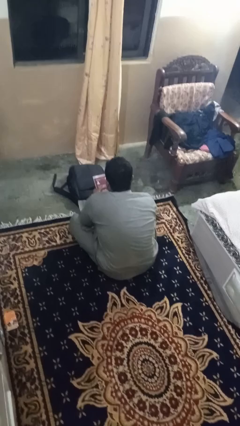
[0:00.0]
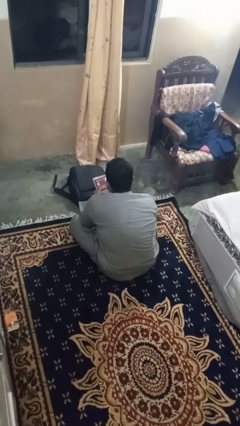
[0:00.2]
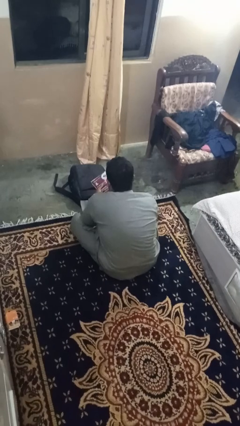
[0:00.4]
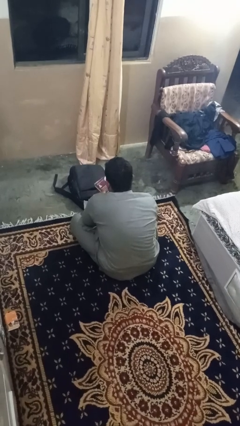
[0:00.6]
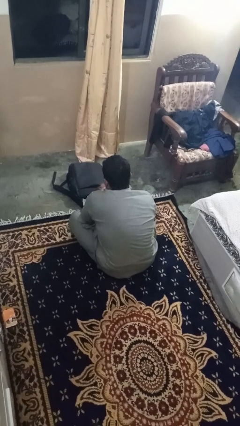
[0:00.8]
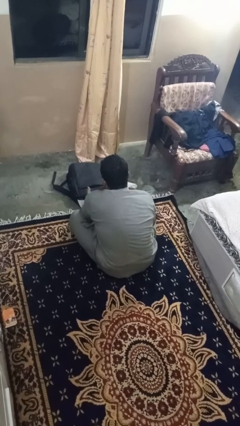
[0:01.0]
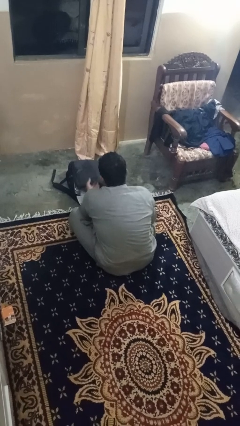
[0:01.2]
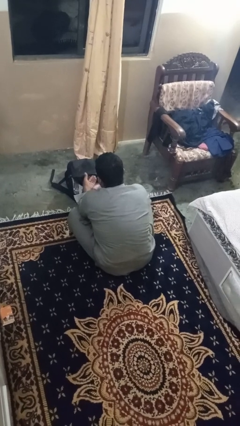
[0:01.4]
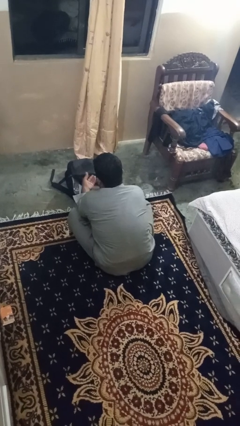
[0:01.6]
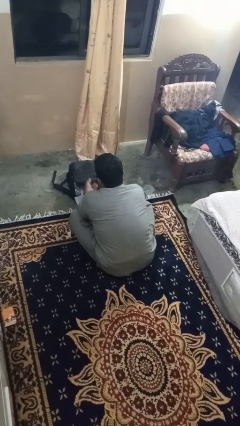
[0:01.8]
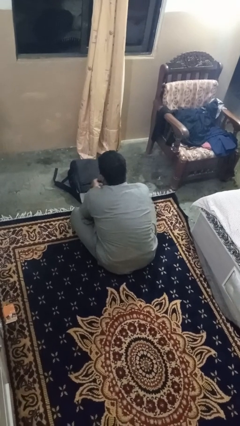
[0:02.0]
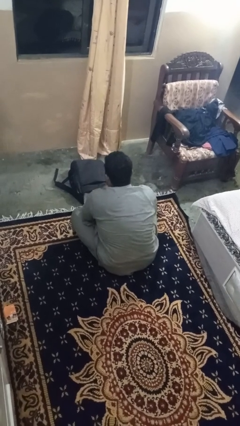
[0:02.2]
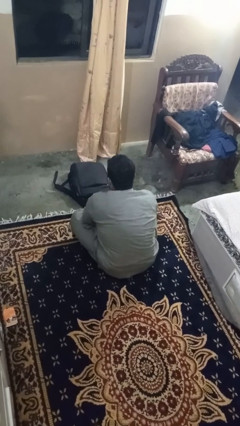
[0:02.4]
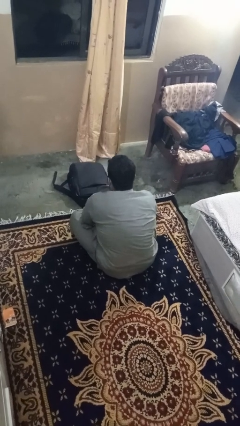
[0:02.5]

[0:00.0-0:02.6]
person puts object into bag

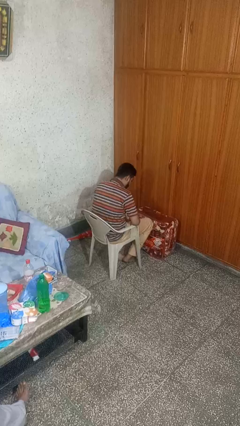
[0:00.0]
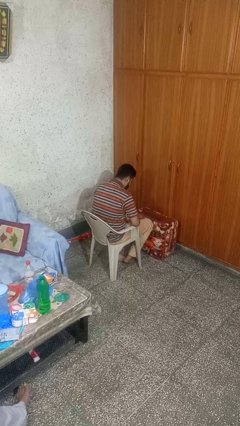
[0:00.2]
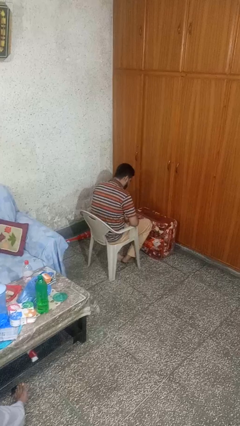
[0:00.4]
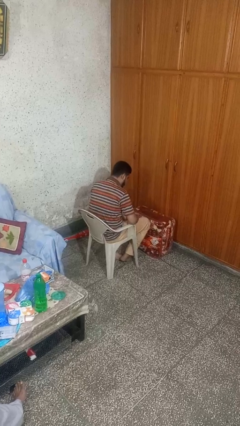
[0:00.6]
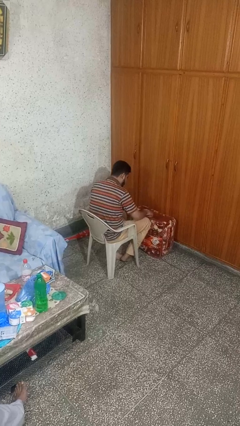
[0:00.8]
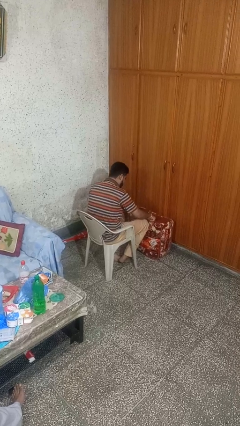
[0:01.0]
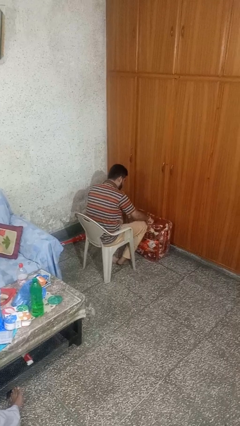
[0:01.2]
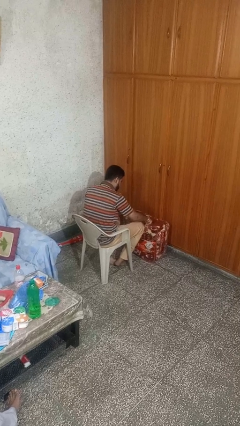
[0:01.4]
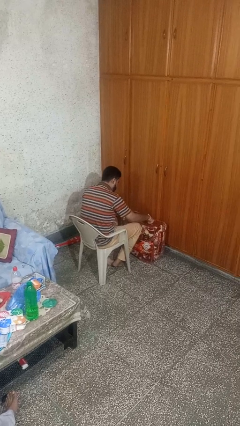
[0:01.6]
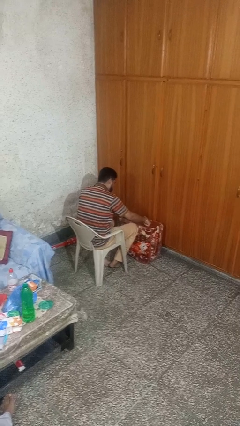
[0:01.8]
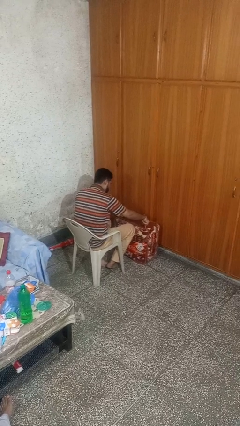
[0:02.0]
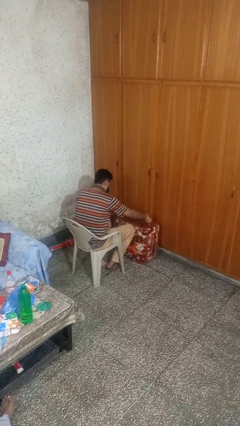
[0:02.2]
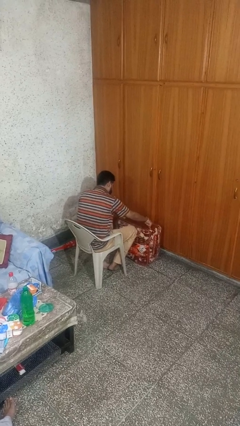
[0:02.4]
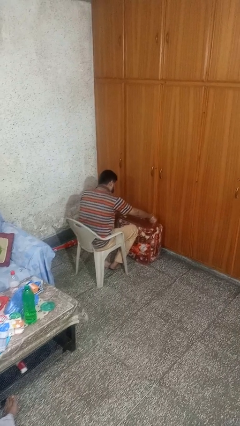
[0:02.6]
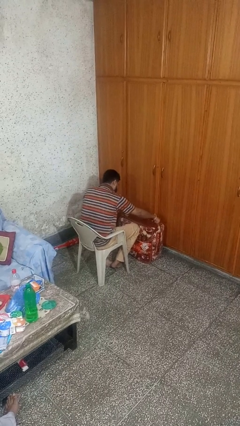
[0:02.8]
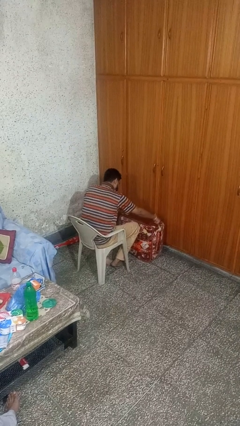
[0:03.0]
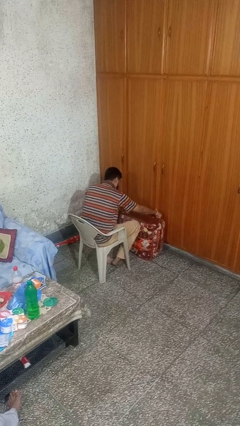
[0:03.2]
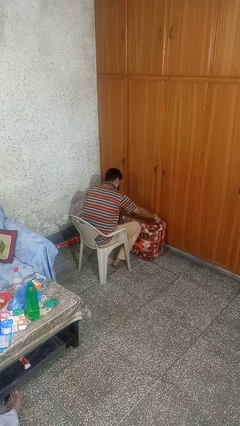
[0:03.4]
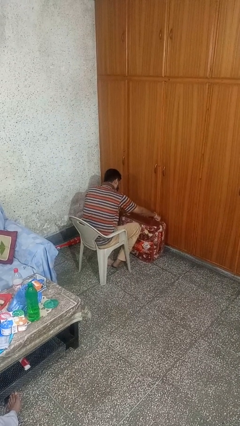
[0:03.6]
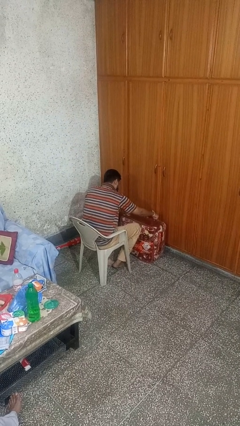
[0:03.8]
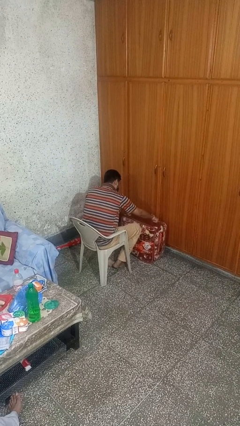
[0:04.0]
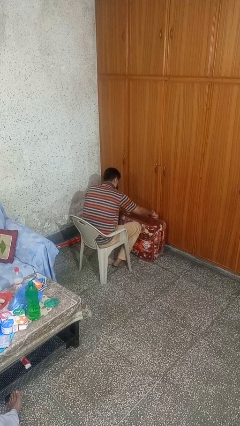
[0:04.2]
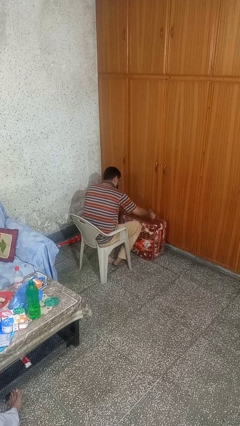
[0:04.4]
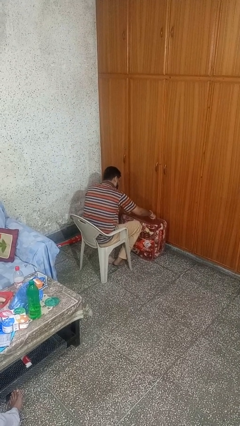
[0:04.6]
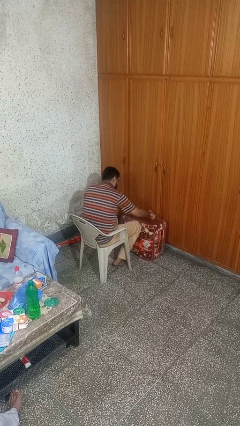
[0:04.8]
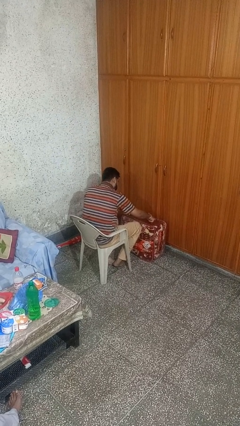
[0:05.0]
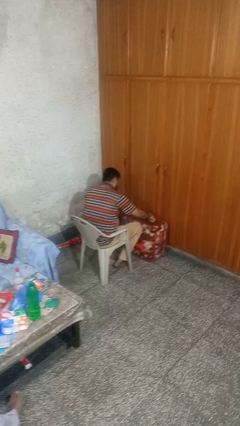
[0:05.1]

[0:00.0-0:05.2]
person taps object with finger

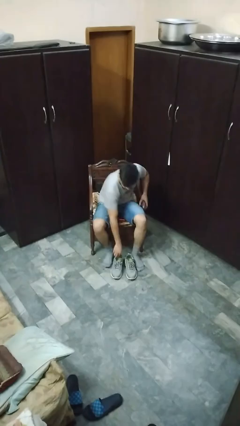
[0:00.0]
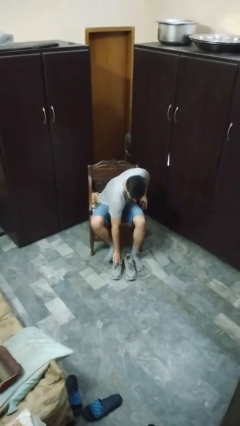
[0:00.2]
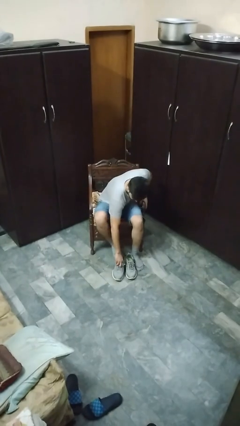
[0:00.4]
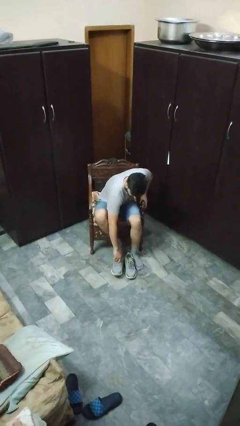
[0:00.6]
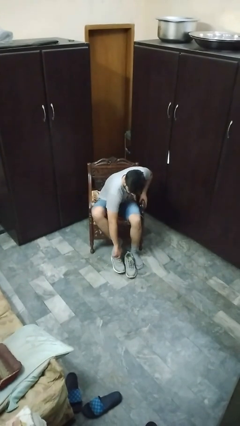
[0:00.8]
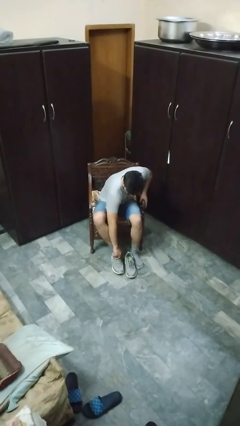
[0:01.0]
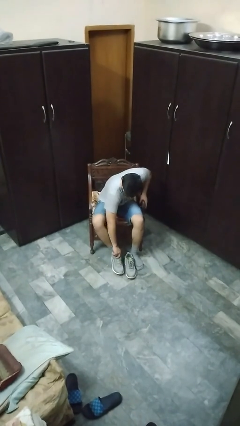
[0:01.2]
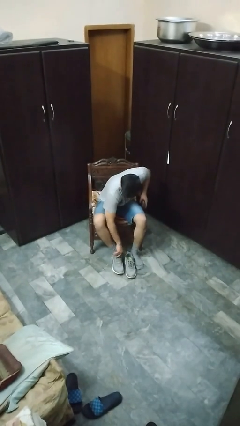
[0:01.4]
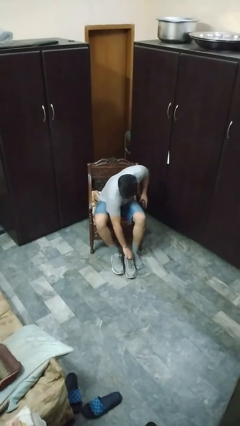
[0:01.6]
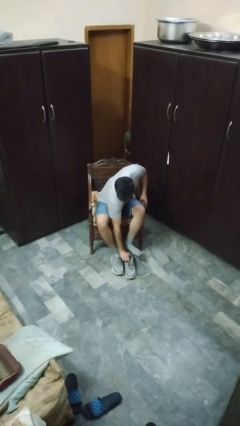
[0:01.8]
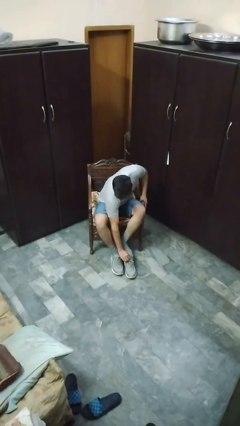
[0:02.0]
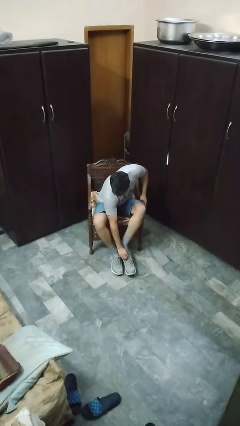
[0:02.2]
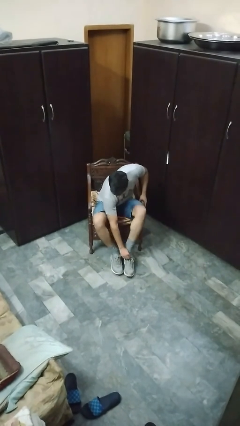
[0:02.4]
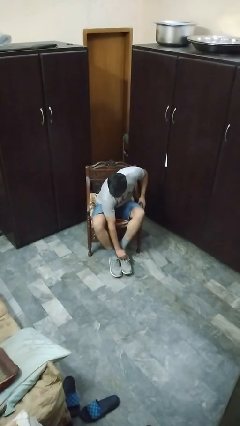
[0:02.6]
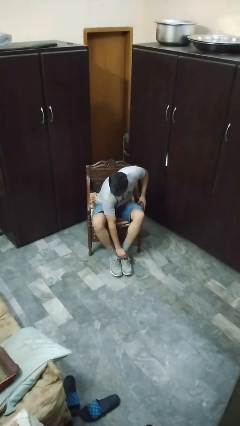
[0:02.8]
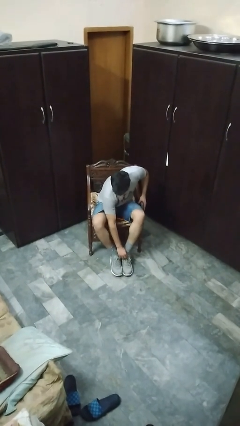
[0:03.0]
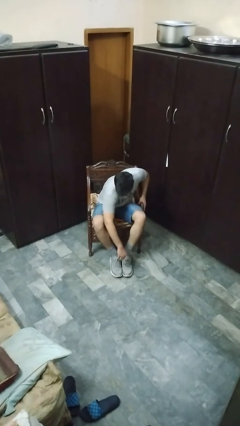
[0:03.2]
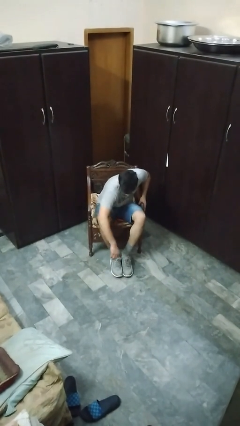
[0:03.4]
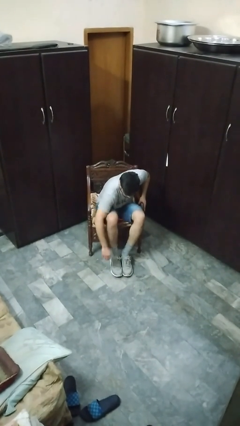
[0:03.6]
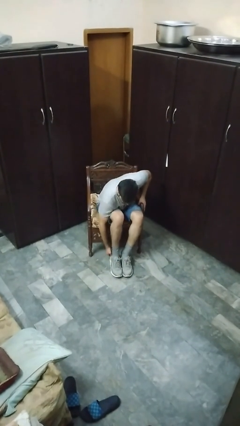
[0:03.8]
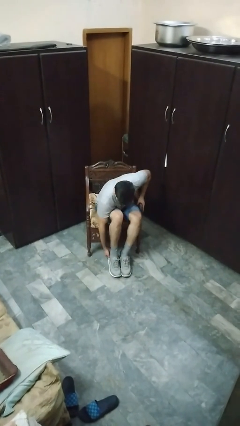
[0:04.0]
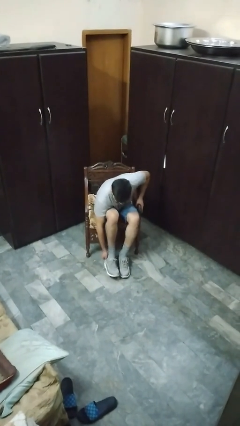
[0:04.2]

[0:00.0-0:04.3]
person puts on shoes

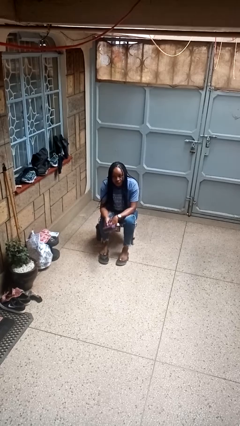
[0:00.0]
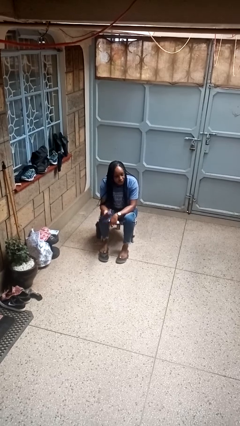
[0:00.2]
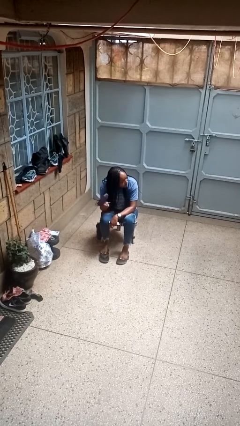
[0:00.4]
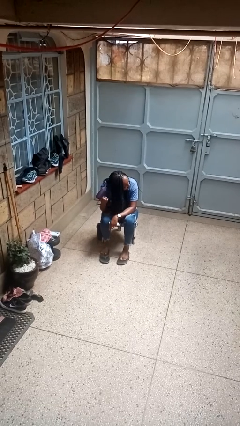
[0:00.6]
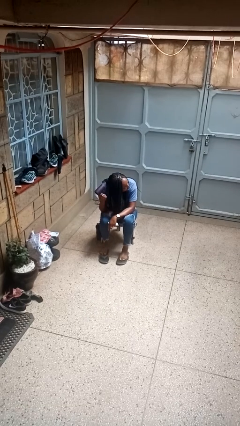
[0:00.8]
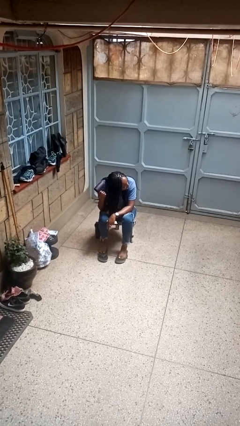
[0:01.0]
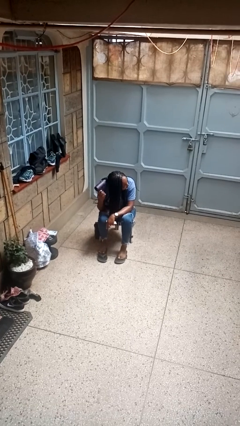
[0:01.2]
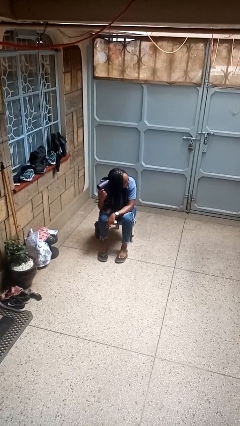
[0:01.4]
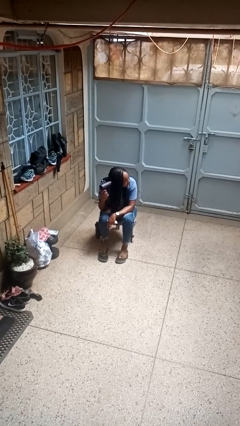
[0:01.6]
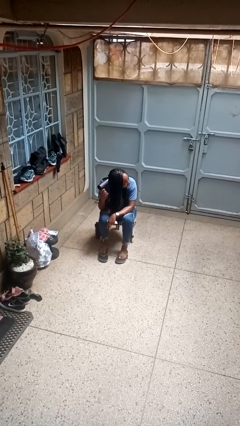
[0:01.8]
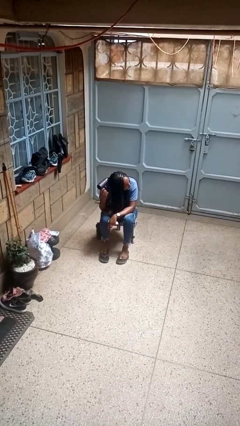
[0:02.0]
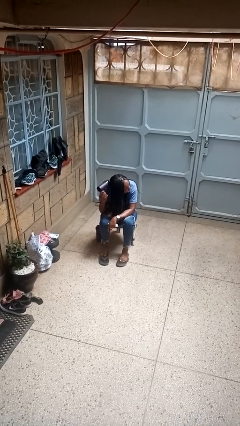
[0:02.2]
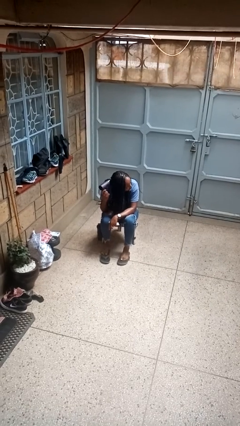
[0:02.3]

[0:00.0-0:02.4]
person dries hair with hairdryer

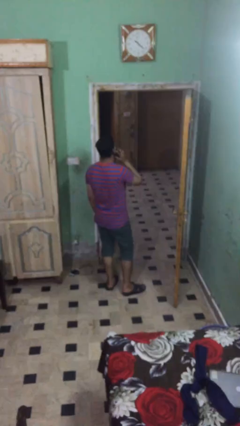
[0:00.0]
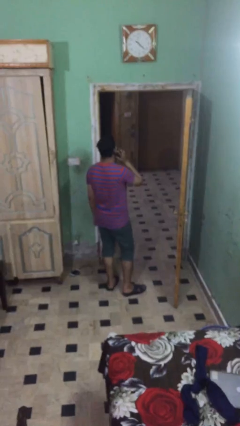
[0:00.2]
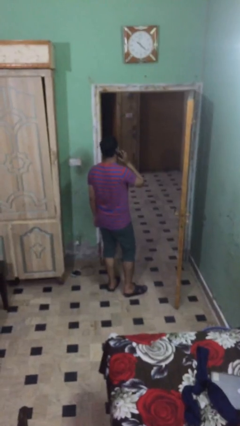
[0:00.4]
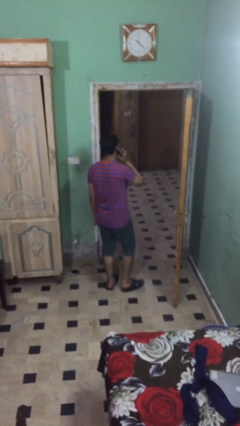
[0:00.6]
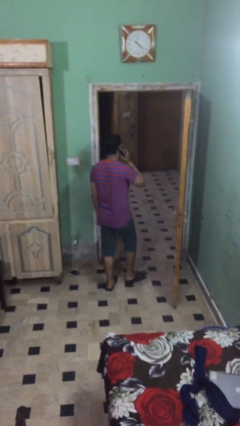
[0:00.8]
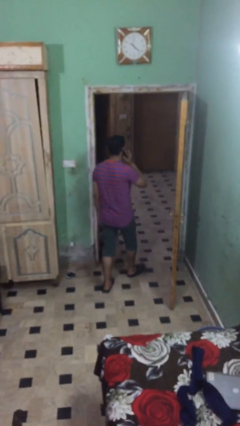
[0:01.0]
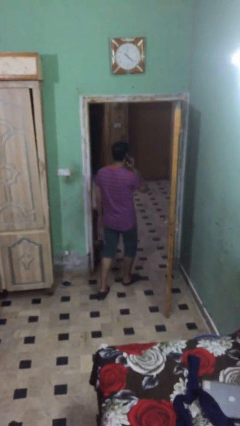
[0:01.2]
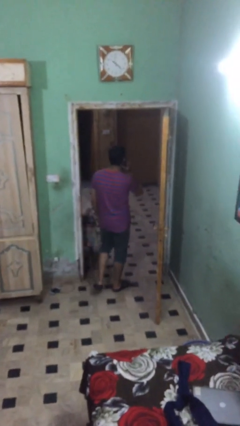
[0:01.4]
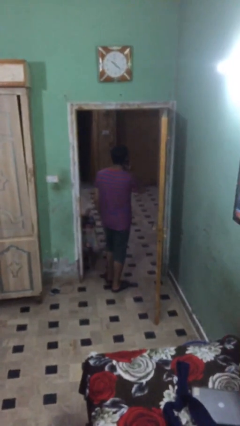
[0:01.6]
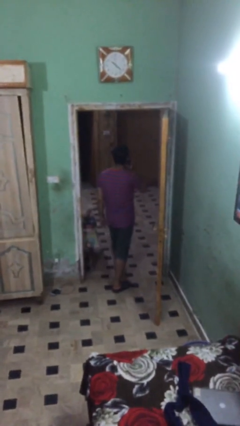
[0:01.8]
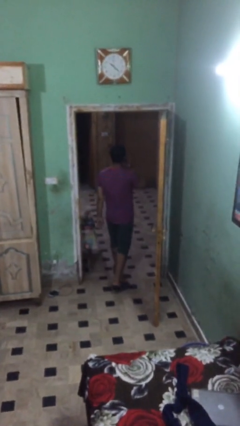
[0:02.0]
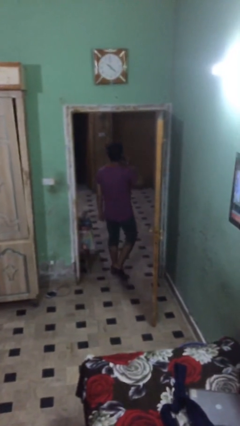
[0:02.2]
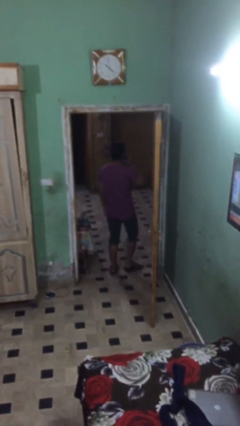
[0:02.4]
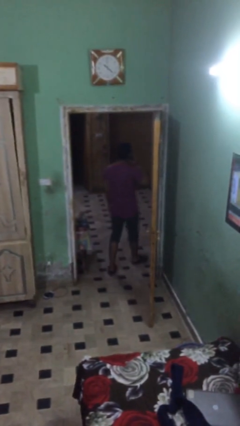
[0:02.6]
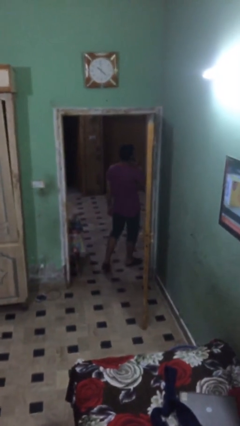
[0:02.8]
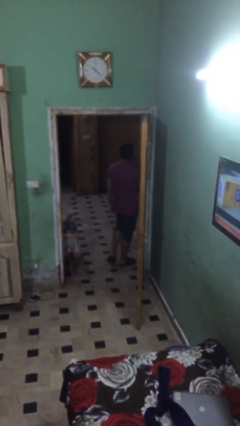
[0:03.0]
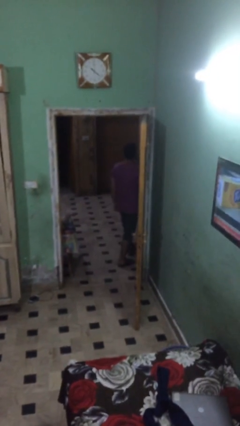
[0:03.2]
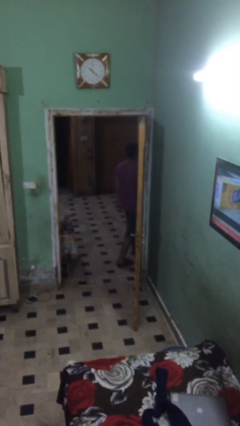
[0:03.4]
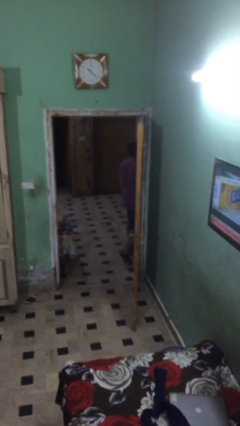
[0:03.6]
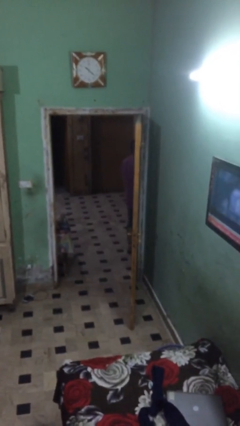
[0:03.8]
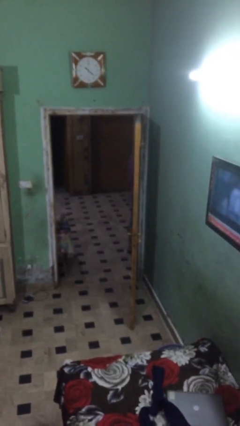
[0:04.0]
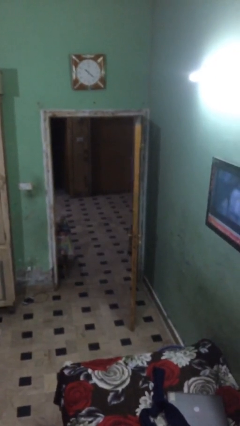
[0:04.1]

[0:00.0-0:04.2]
person exits scene through structure
